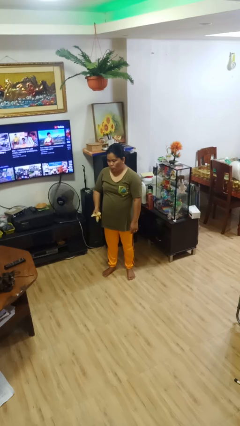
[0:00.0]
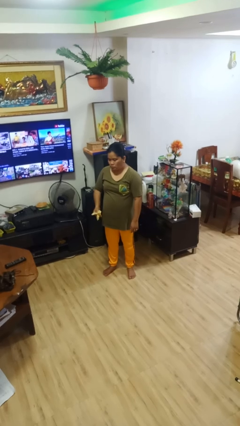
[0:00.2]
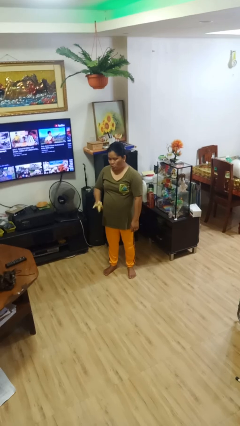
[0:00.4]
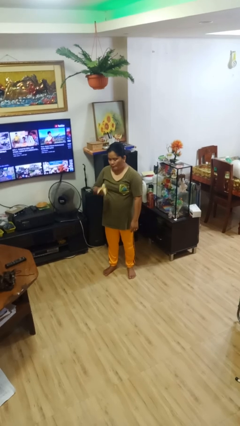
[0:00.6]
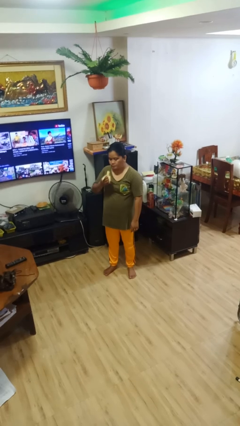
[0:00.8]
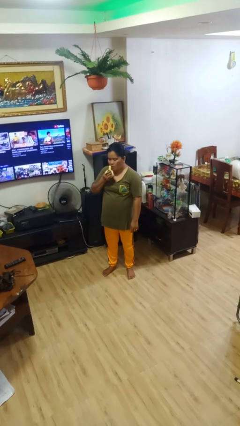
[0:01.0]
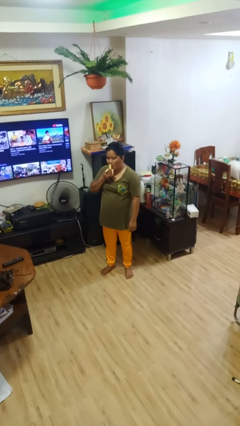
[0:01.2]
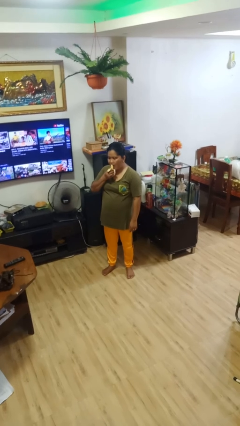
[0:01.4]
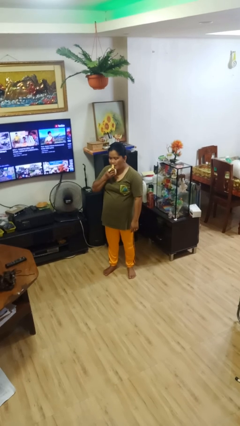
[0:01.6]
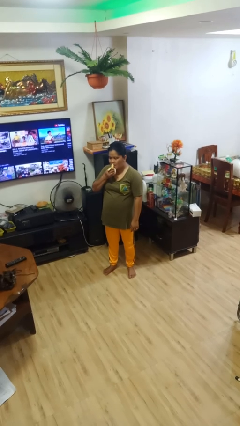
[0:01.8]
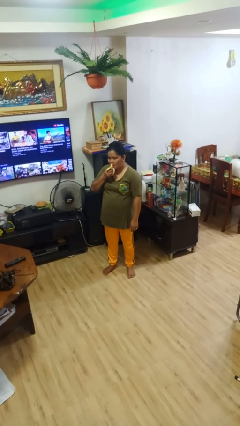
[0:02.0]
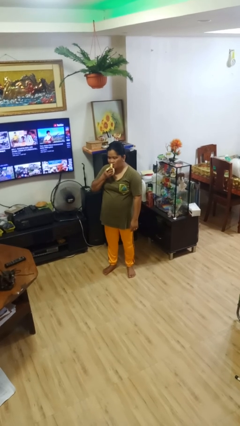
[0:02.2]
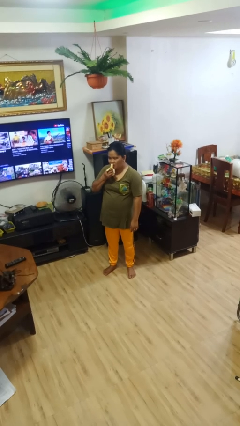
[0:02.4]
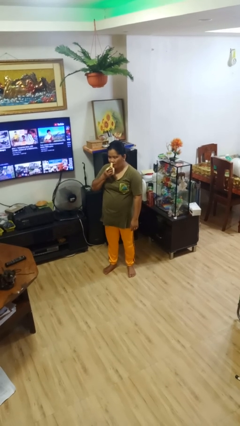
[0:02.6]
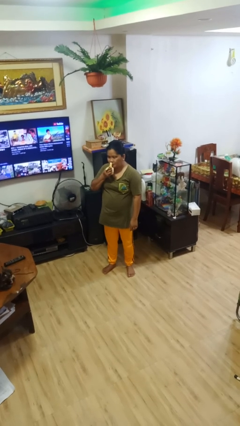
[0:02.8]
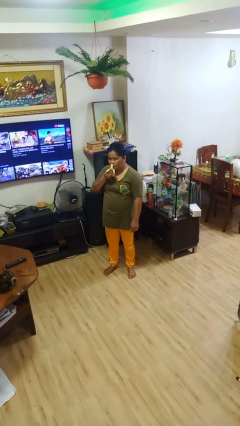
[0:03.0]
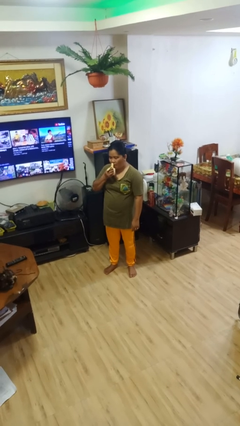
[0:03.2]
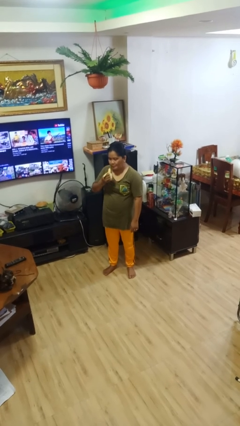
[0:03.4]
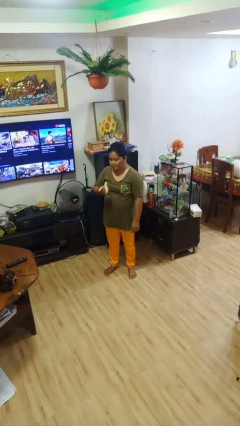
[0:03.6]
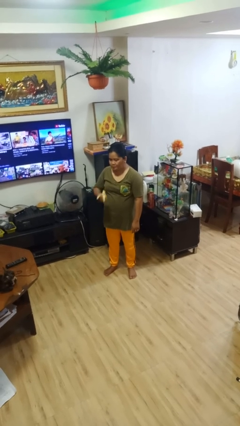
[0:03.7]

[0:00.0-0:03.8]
person eats banana

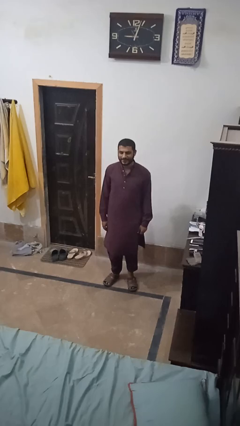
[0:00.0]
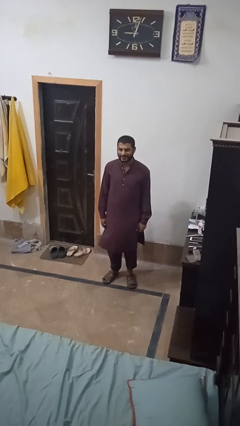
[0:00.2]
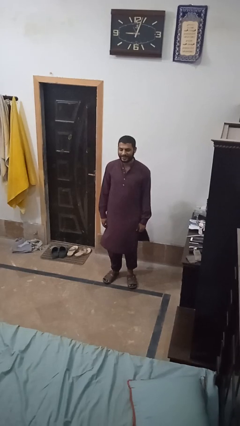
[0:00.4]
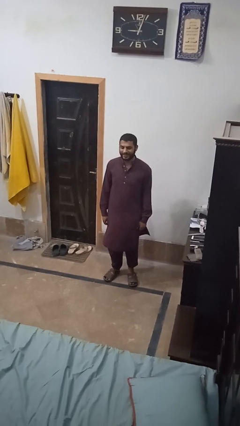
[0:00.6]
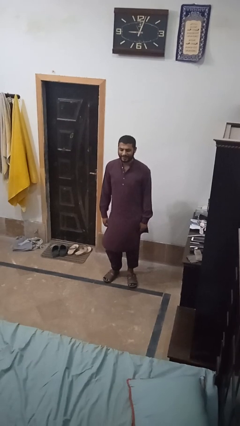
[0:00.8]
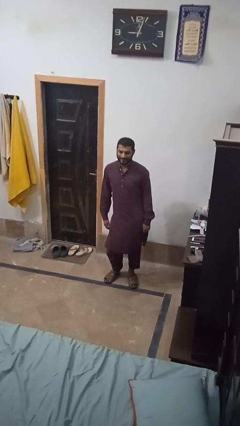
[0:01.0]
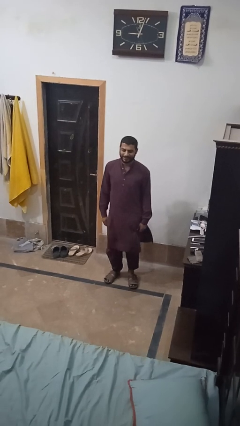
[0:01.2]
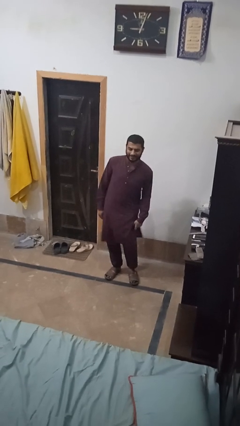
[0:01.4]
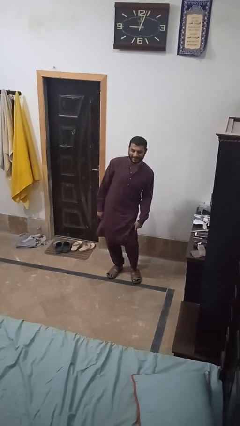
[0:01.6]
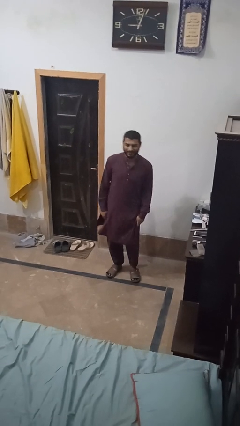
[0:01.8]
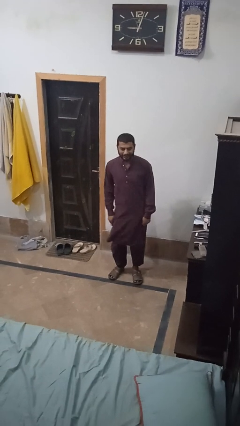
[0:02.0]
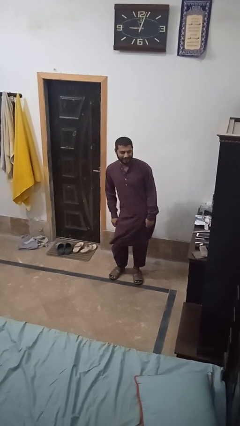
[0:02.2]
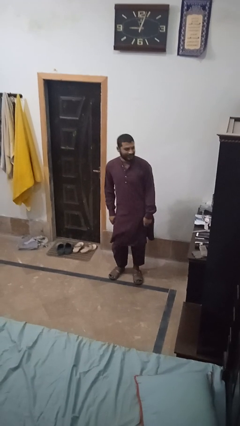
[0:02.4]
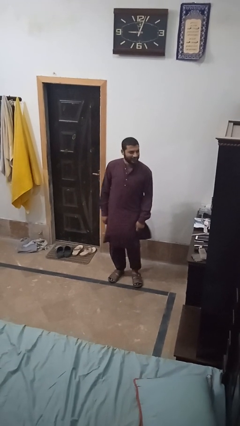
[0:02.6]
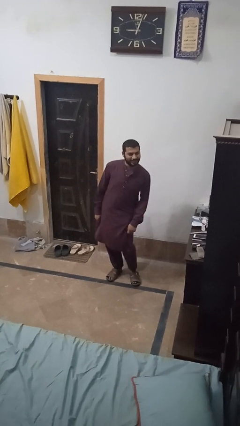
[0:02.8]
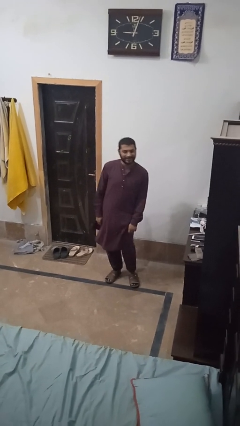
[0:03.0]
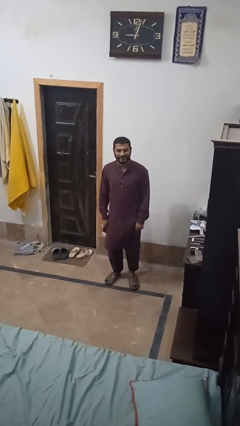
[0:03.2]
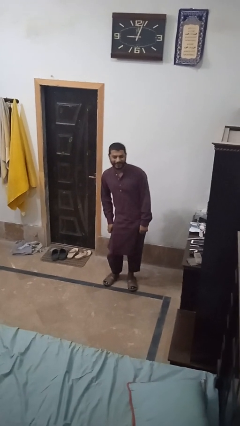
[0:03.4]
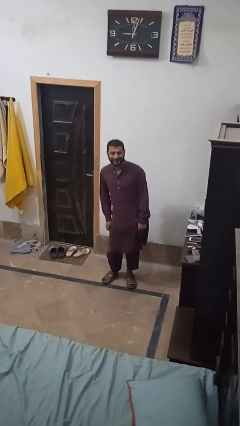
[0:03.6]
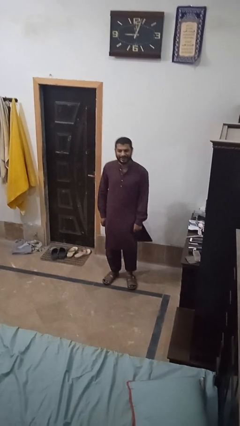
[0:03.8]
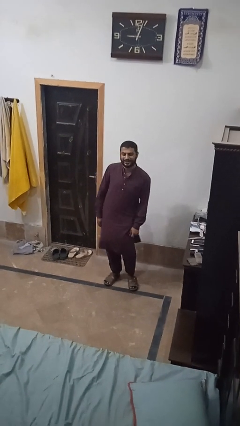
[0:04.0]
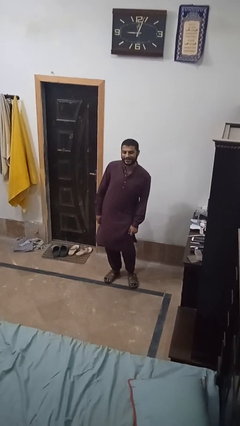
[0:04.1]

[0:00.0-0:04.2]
person wiggles hips

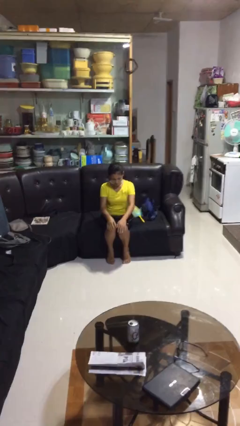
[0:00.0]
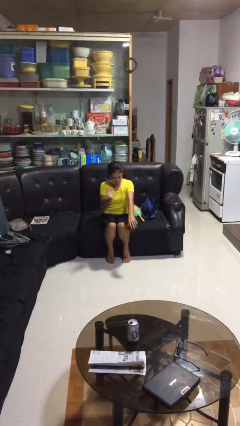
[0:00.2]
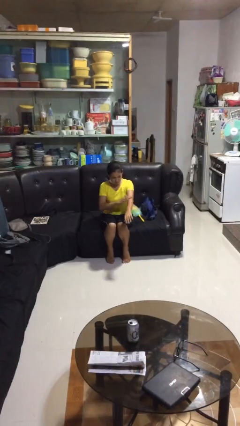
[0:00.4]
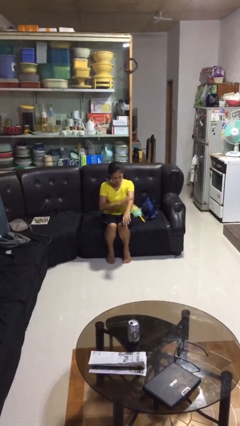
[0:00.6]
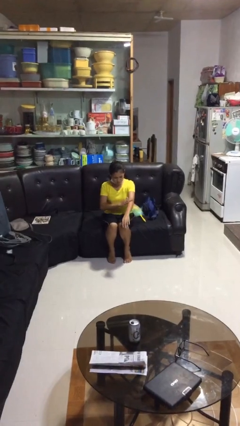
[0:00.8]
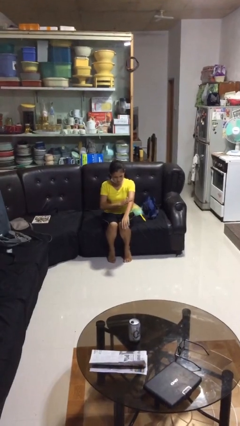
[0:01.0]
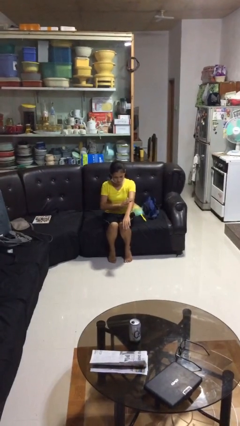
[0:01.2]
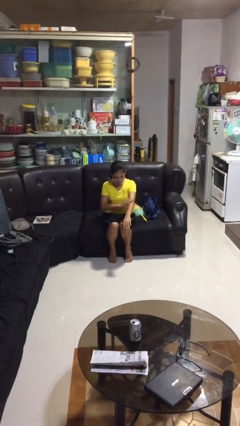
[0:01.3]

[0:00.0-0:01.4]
person swats bug

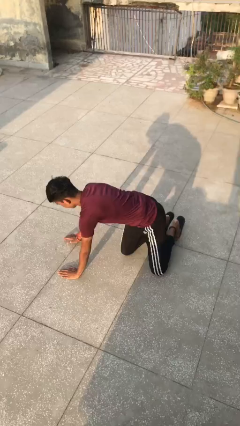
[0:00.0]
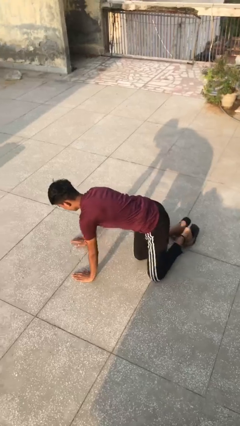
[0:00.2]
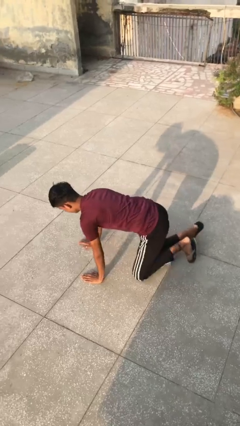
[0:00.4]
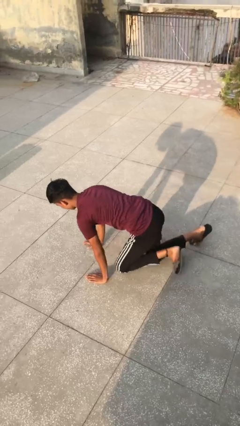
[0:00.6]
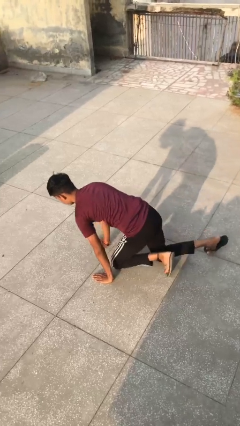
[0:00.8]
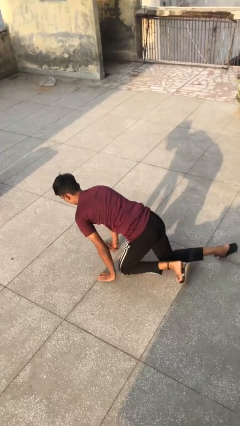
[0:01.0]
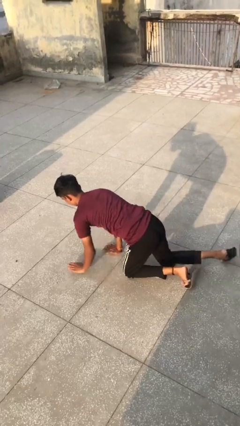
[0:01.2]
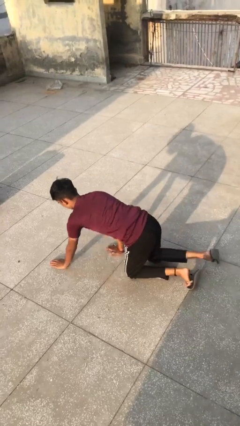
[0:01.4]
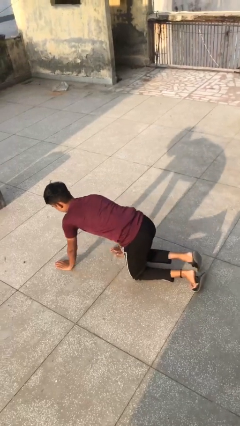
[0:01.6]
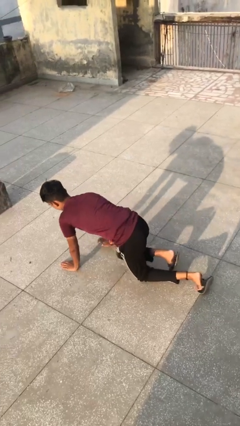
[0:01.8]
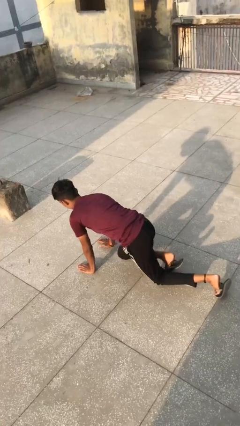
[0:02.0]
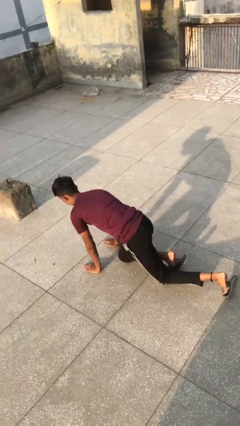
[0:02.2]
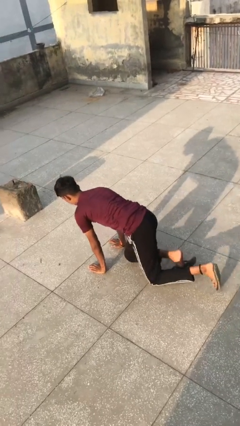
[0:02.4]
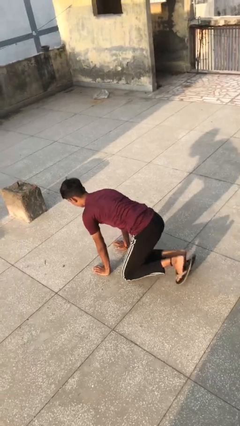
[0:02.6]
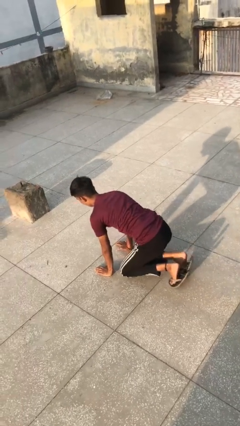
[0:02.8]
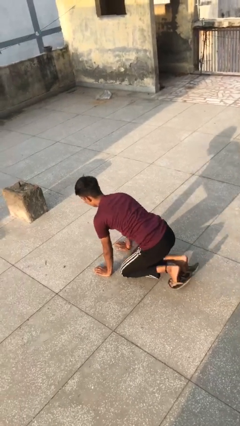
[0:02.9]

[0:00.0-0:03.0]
person crawls

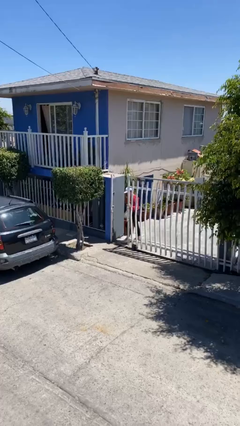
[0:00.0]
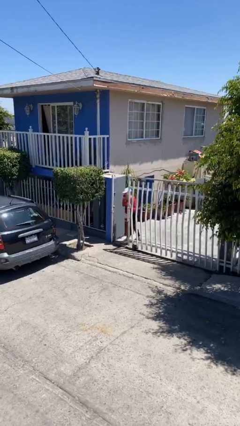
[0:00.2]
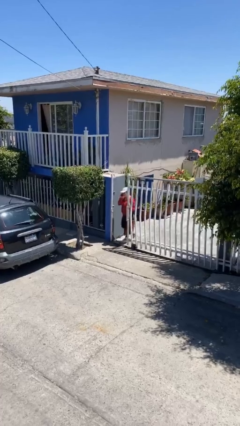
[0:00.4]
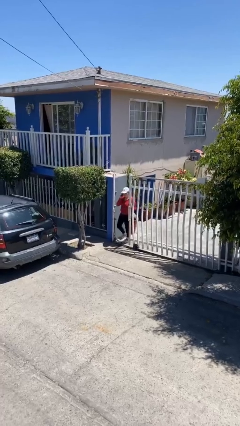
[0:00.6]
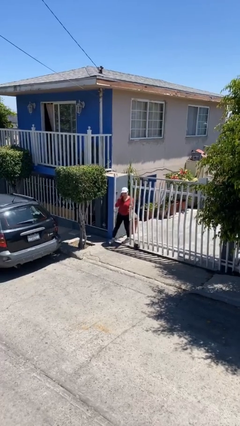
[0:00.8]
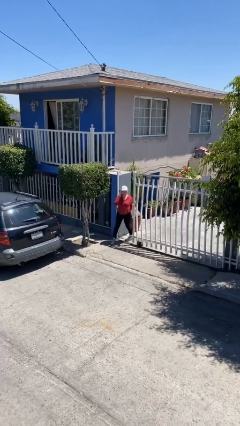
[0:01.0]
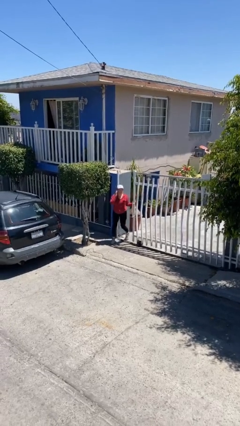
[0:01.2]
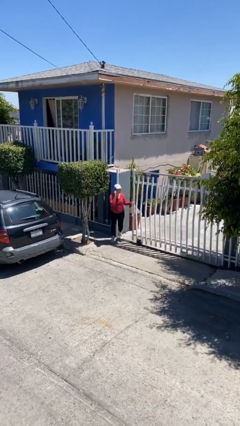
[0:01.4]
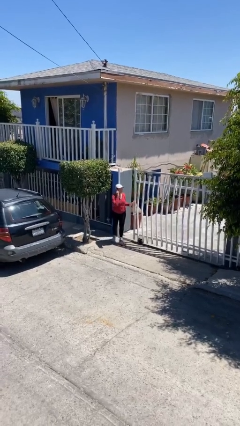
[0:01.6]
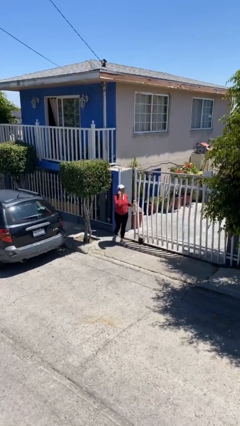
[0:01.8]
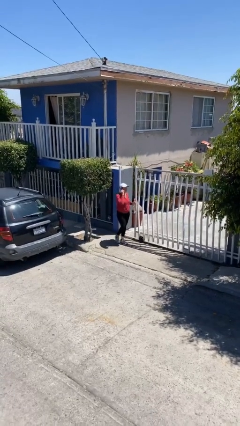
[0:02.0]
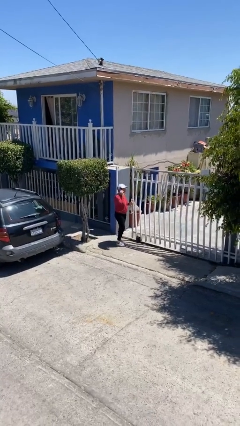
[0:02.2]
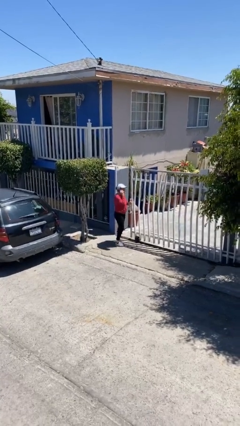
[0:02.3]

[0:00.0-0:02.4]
person enters scene through structure

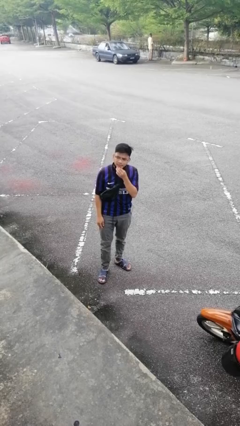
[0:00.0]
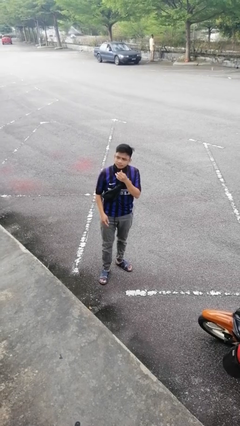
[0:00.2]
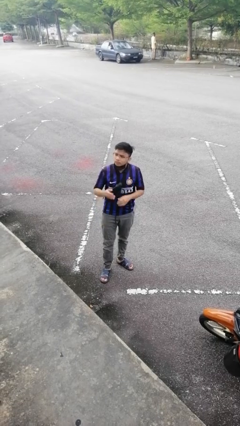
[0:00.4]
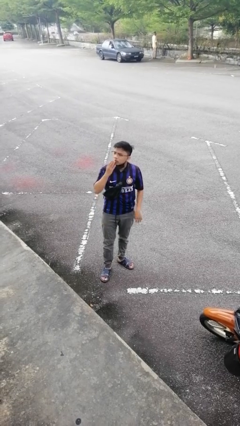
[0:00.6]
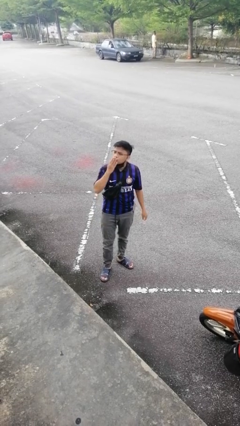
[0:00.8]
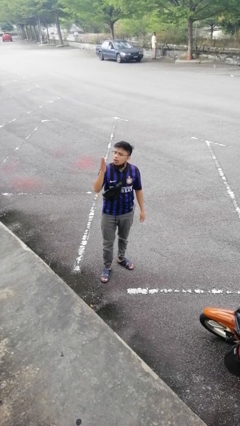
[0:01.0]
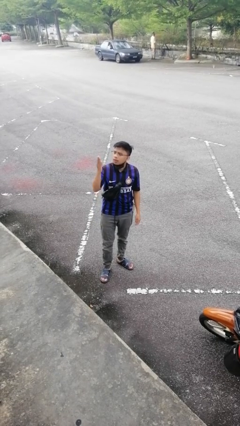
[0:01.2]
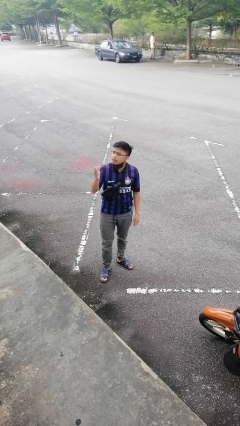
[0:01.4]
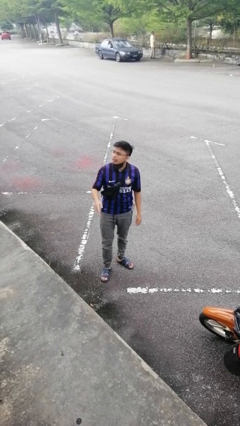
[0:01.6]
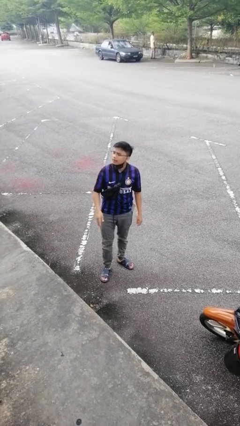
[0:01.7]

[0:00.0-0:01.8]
person gestures blow kiss

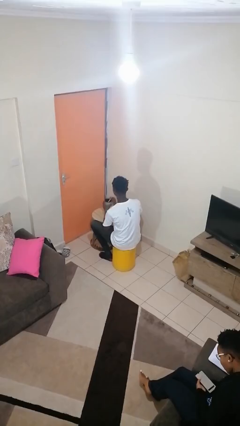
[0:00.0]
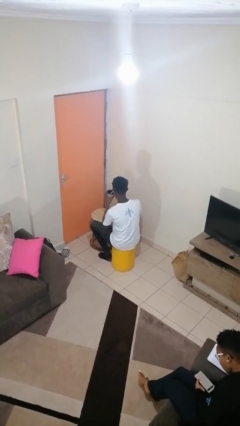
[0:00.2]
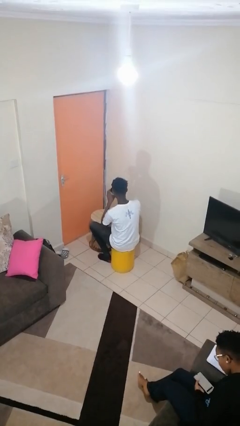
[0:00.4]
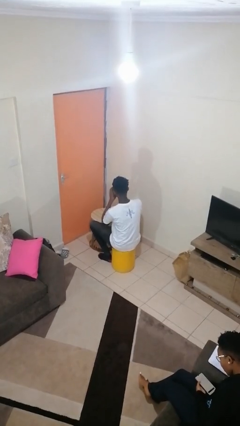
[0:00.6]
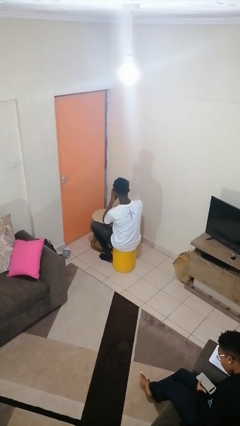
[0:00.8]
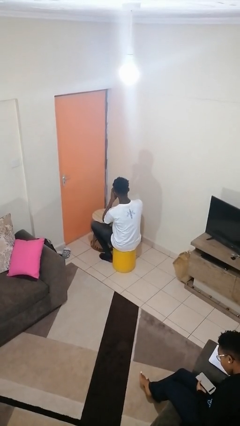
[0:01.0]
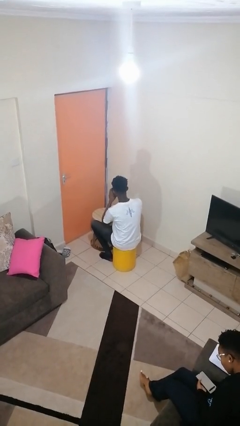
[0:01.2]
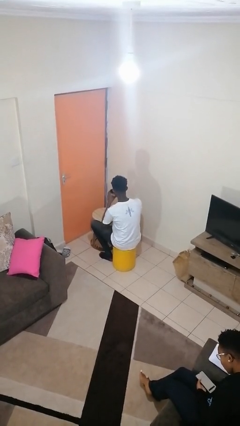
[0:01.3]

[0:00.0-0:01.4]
person drinks from mug
